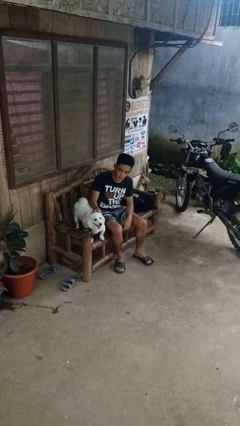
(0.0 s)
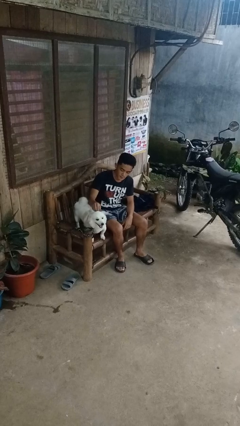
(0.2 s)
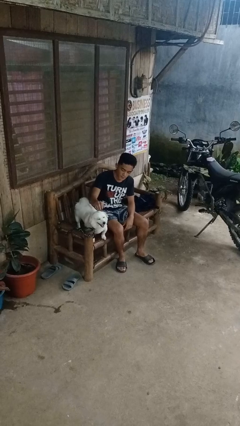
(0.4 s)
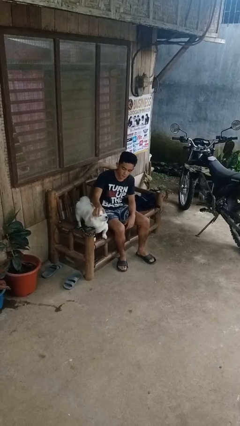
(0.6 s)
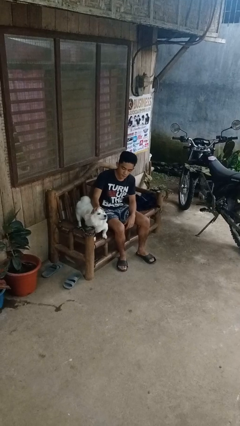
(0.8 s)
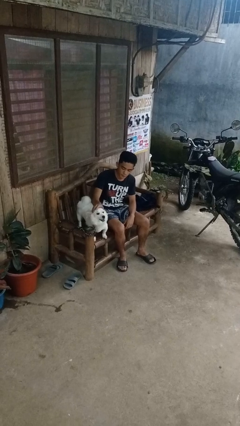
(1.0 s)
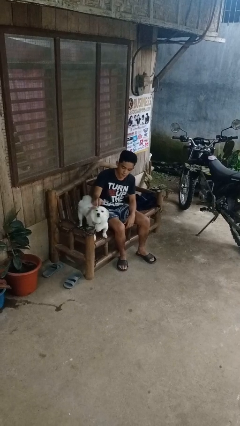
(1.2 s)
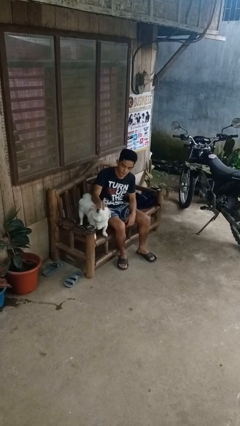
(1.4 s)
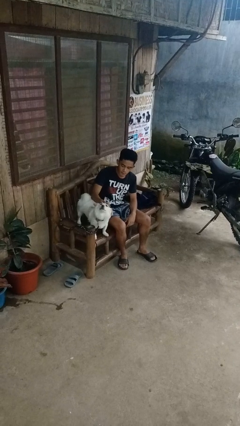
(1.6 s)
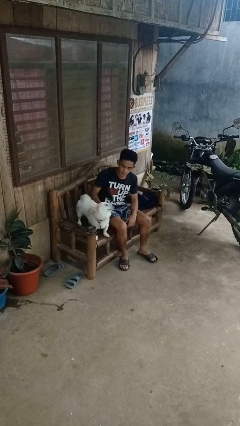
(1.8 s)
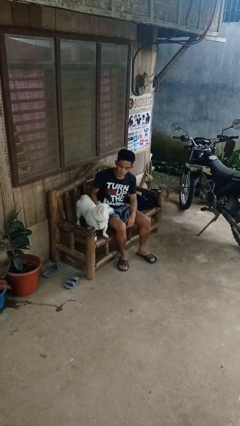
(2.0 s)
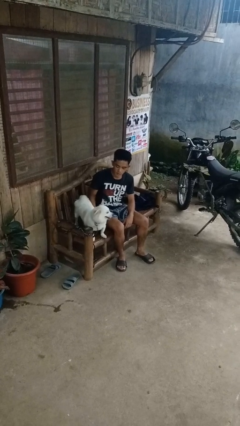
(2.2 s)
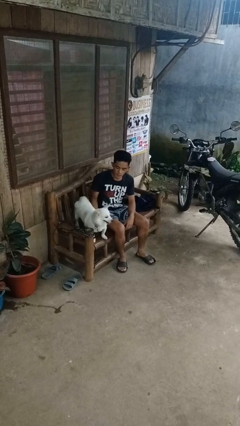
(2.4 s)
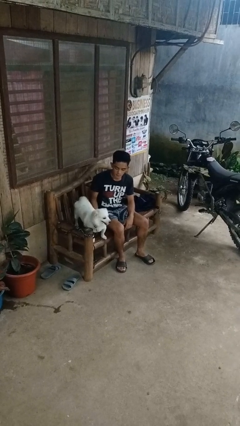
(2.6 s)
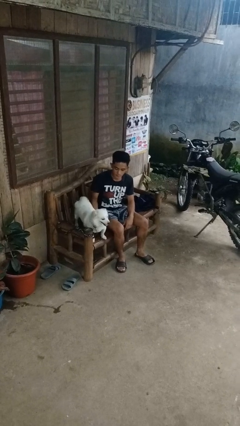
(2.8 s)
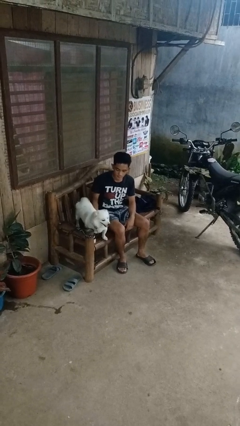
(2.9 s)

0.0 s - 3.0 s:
person pets dog

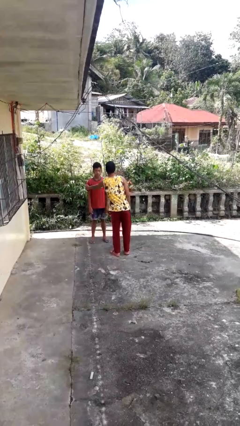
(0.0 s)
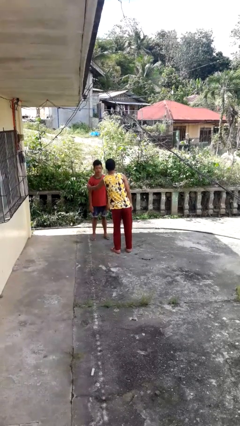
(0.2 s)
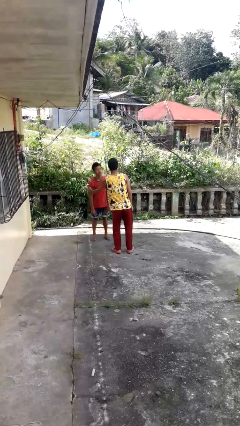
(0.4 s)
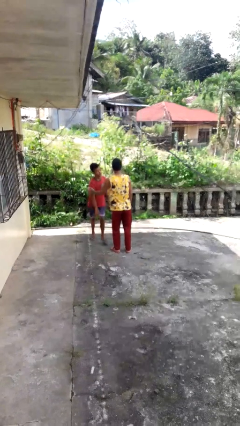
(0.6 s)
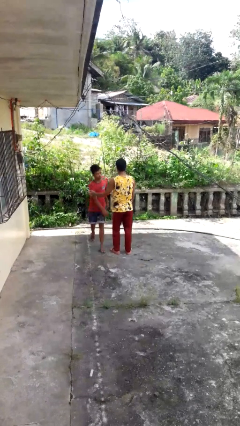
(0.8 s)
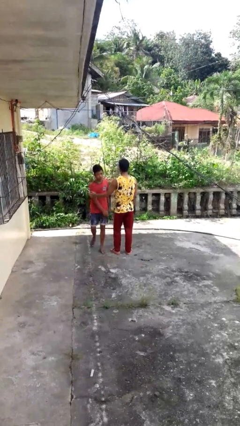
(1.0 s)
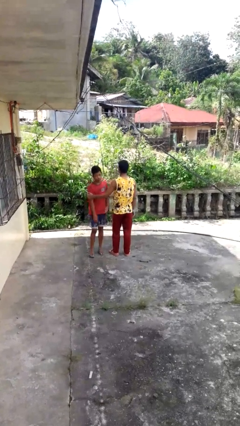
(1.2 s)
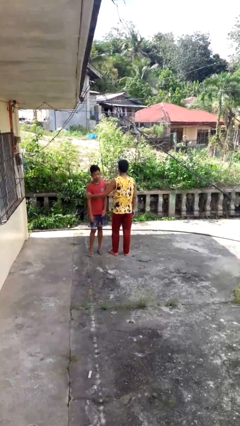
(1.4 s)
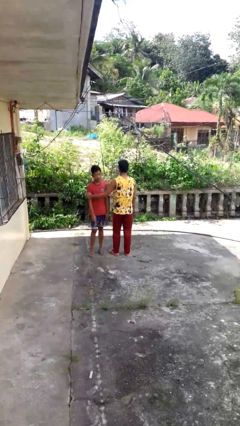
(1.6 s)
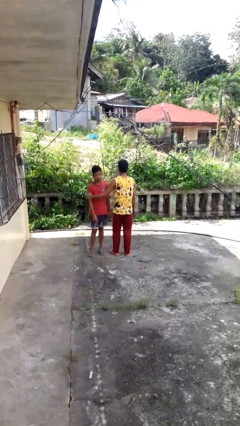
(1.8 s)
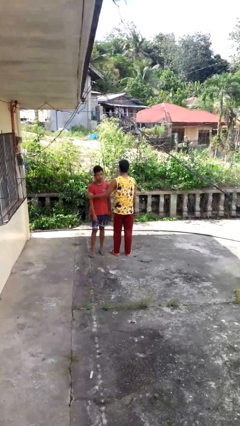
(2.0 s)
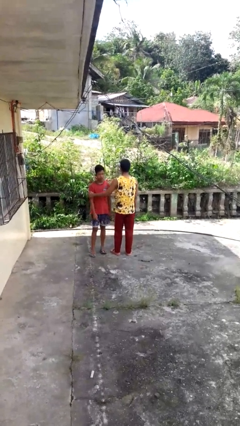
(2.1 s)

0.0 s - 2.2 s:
person grabs person by bicep

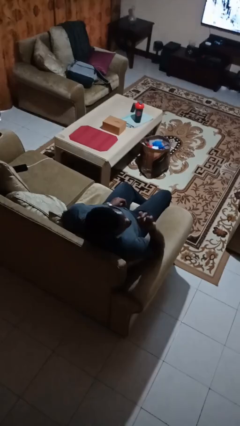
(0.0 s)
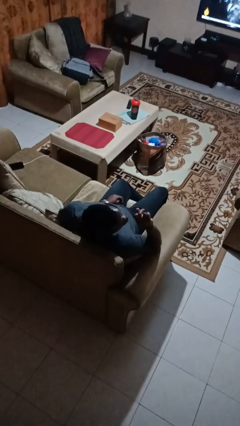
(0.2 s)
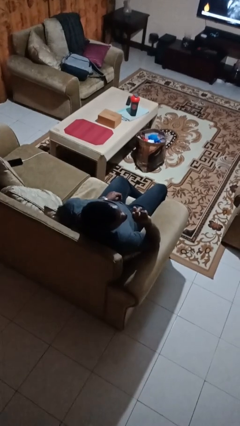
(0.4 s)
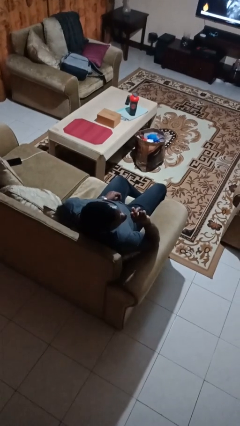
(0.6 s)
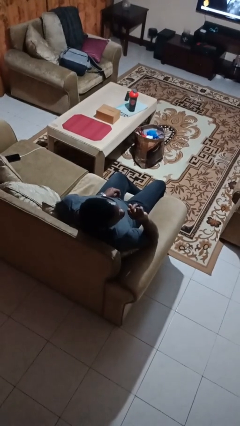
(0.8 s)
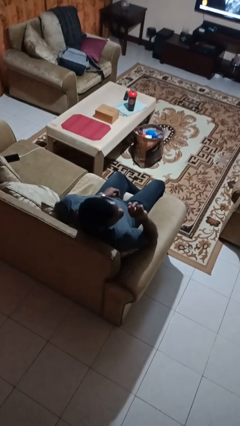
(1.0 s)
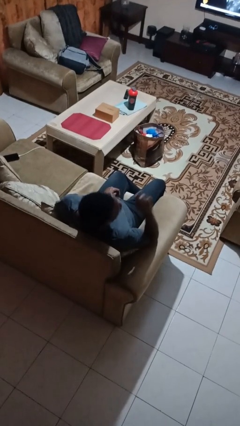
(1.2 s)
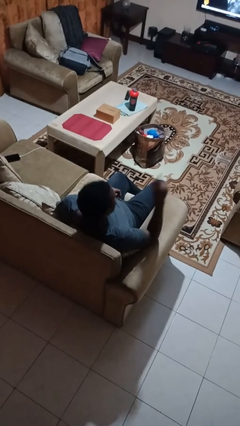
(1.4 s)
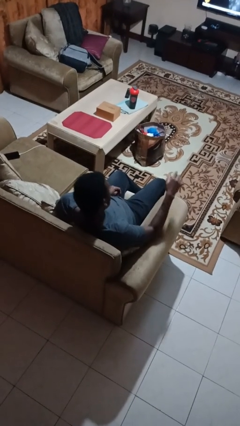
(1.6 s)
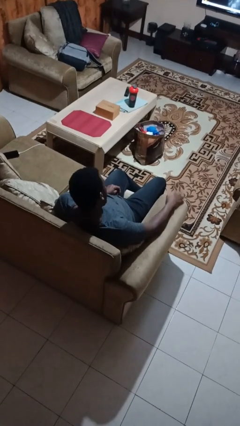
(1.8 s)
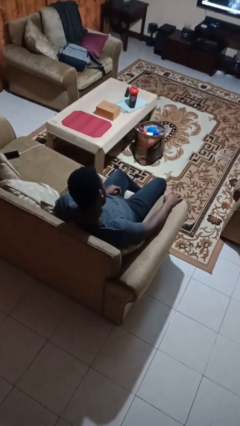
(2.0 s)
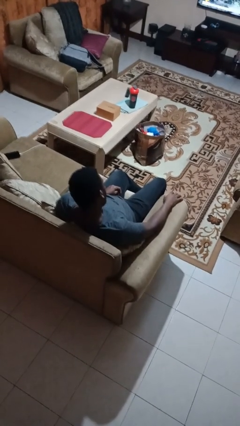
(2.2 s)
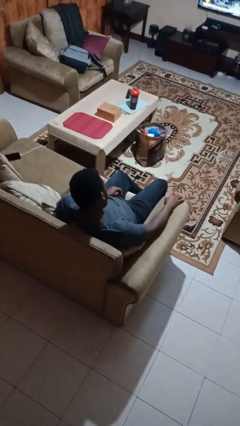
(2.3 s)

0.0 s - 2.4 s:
person gestures be quiet

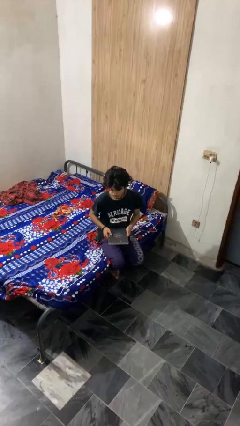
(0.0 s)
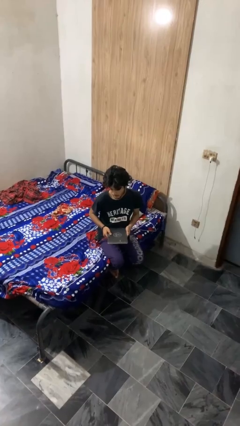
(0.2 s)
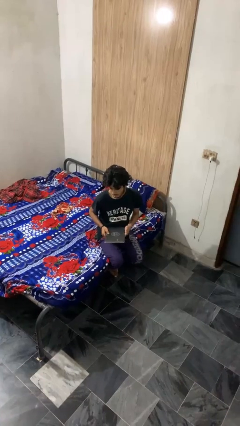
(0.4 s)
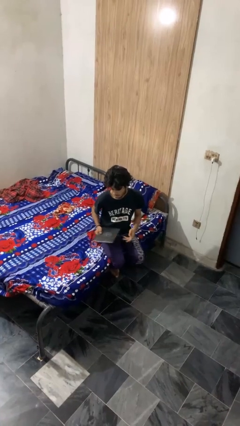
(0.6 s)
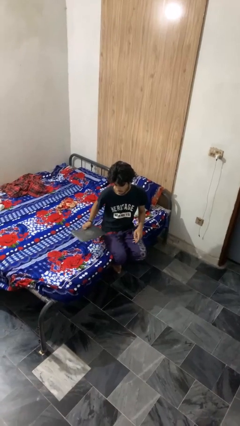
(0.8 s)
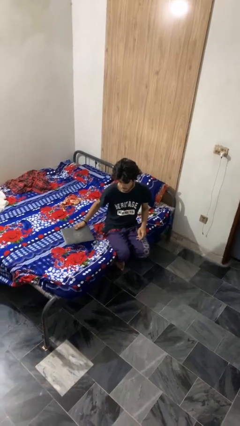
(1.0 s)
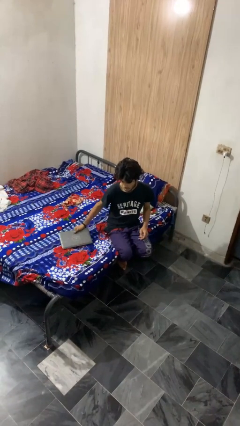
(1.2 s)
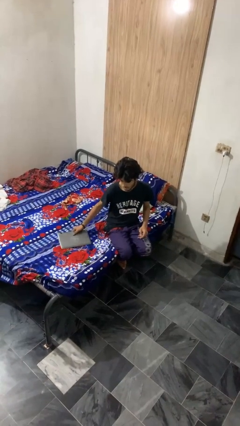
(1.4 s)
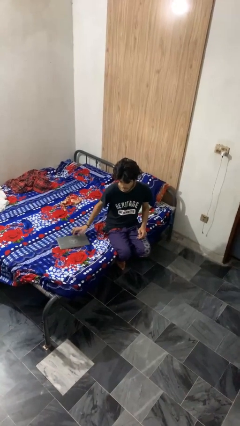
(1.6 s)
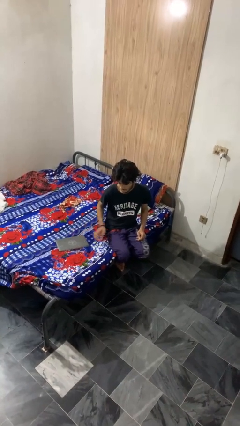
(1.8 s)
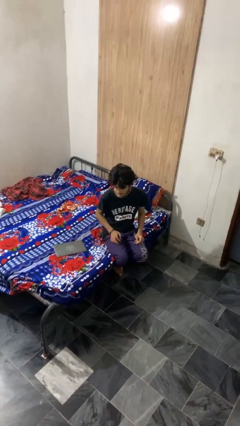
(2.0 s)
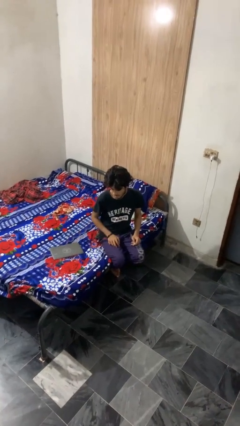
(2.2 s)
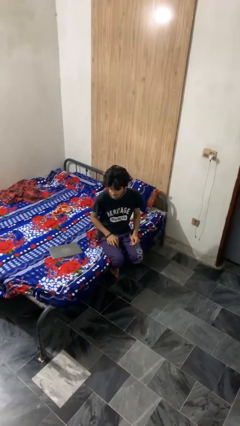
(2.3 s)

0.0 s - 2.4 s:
person puts down object on bed

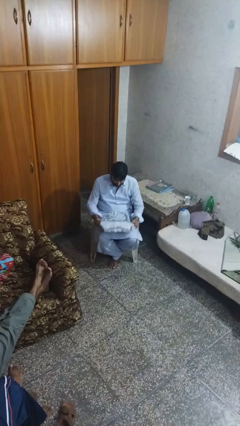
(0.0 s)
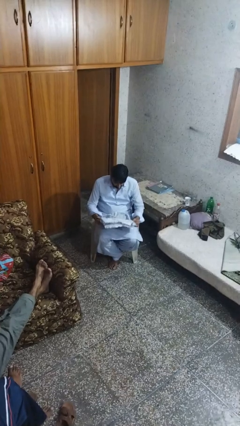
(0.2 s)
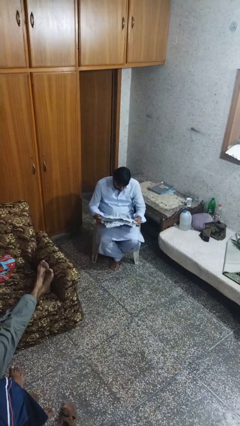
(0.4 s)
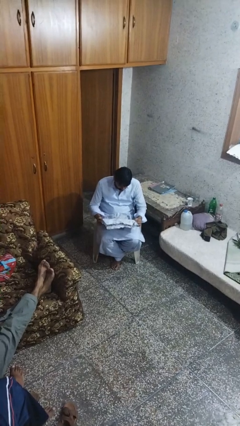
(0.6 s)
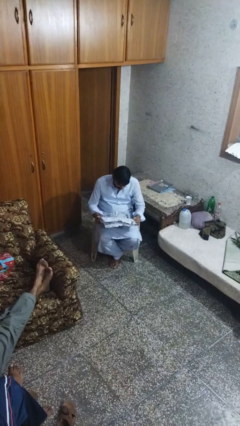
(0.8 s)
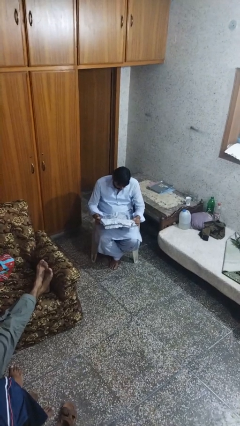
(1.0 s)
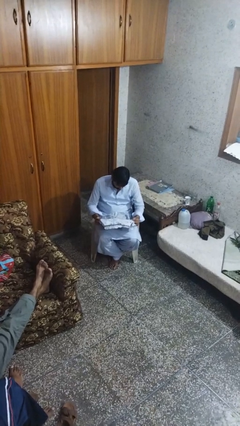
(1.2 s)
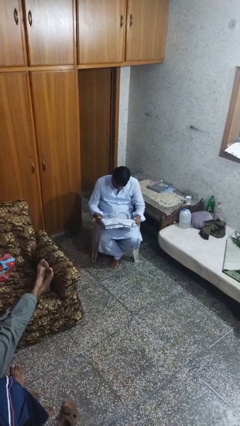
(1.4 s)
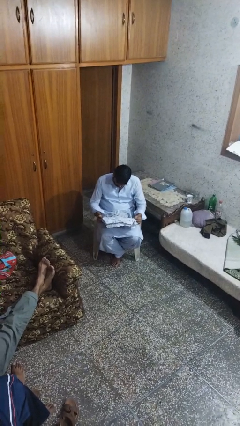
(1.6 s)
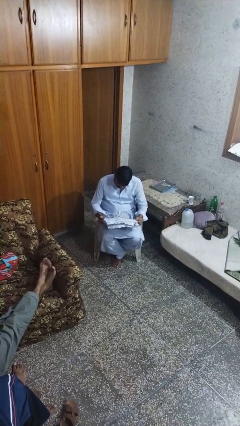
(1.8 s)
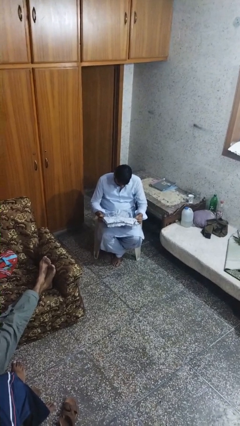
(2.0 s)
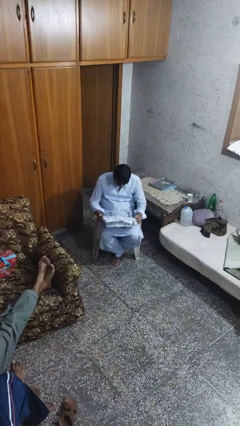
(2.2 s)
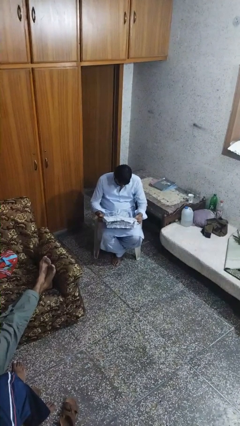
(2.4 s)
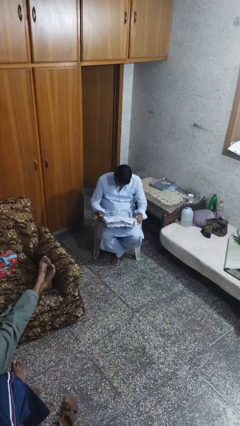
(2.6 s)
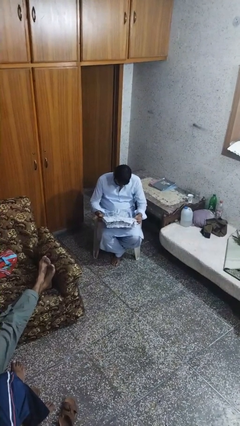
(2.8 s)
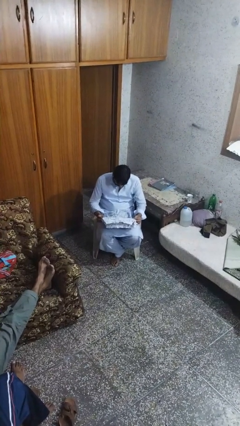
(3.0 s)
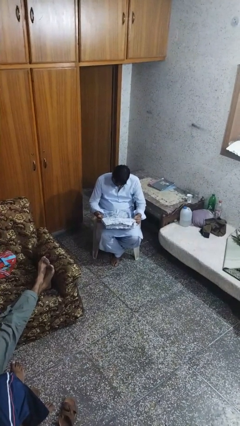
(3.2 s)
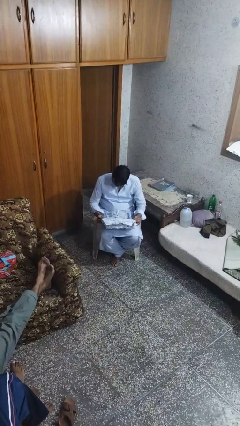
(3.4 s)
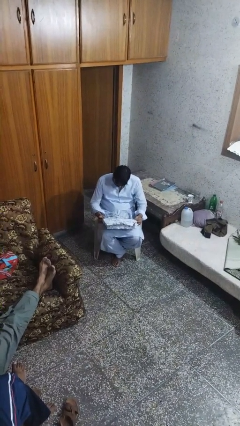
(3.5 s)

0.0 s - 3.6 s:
person reads newspaper

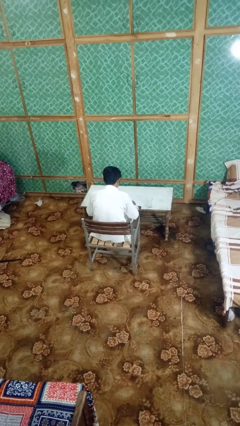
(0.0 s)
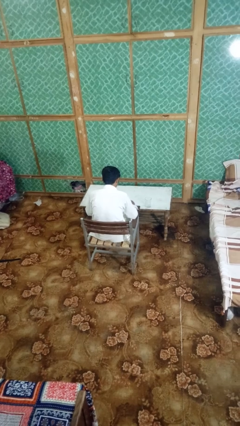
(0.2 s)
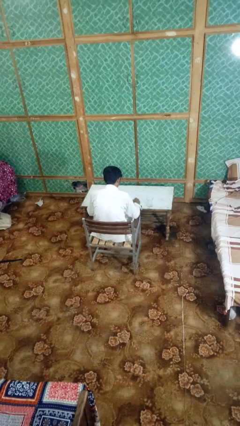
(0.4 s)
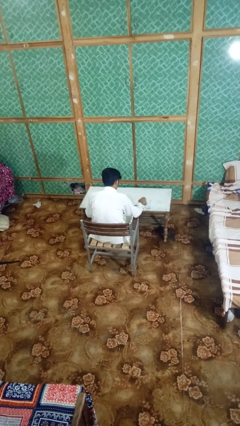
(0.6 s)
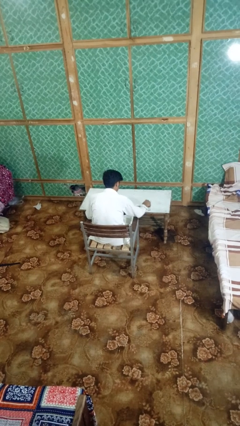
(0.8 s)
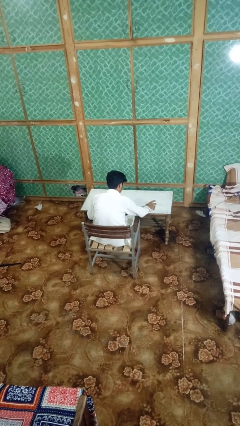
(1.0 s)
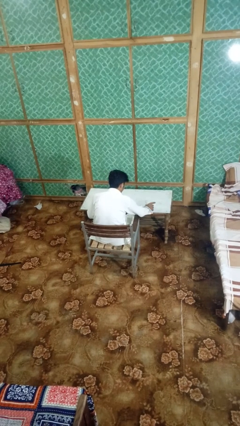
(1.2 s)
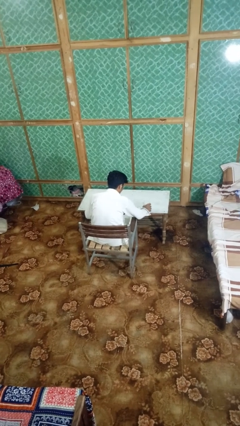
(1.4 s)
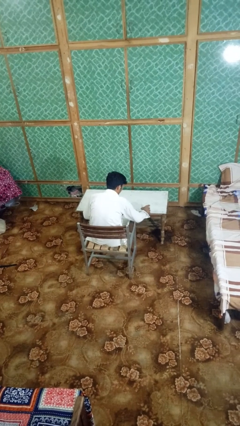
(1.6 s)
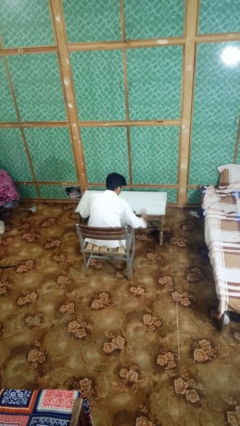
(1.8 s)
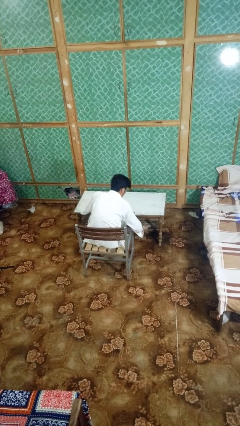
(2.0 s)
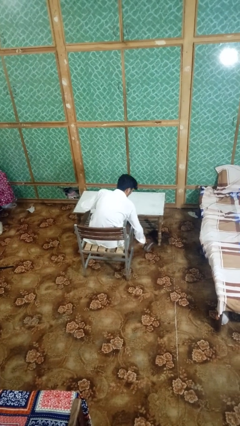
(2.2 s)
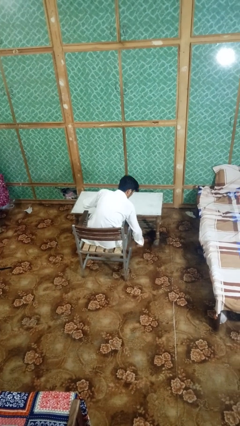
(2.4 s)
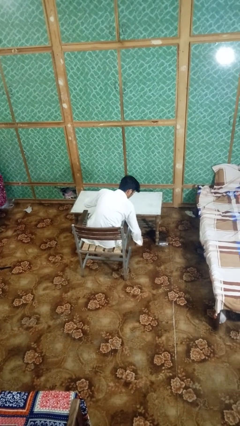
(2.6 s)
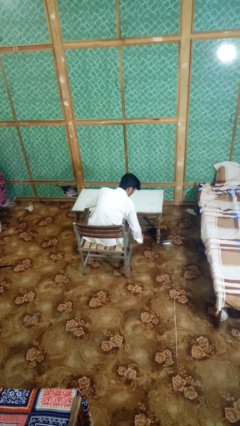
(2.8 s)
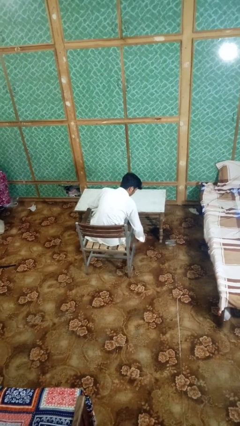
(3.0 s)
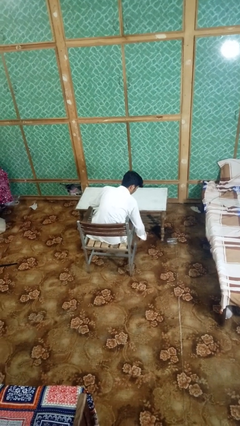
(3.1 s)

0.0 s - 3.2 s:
person knocks over glass

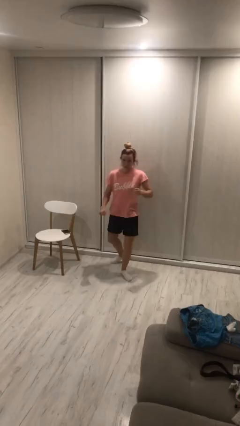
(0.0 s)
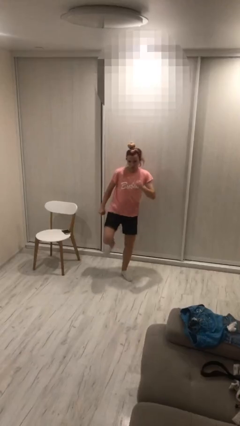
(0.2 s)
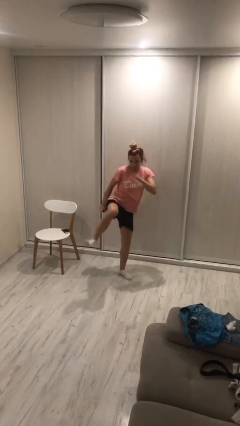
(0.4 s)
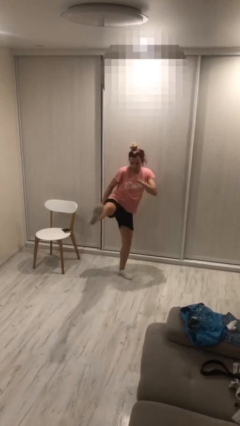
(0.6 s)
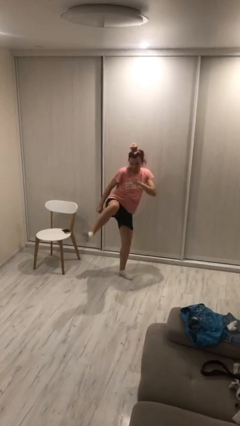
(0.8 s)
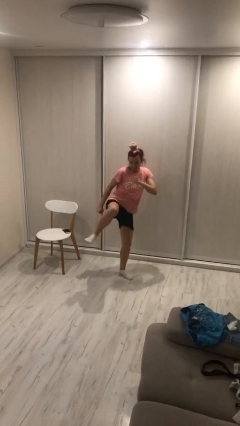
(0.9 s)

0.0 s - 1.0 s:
person karate kicks
